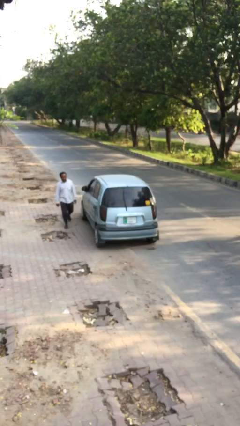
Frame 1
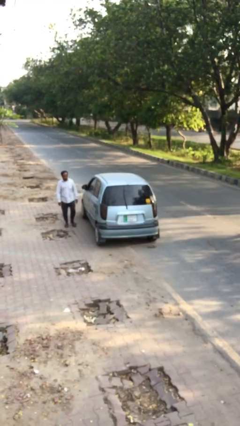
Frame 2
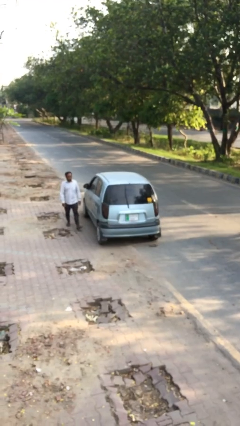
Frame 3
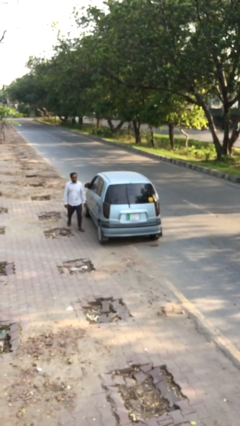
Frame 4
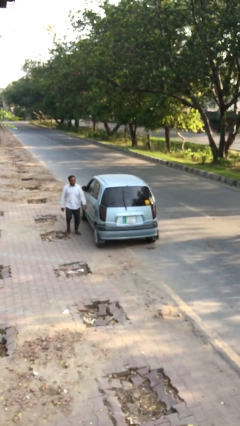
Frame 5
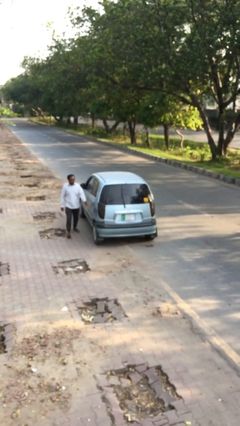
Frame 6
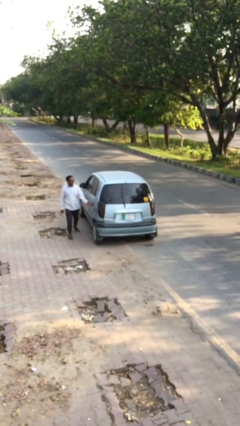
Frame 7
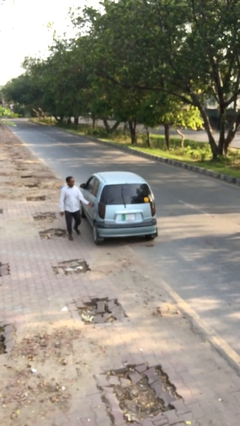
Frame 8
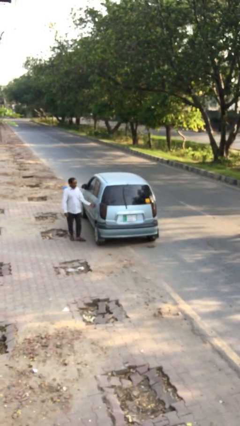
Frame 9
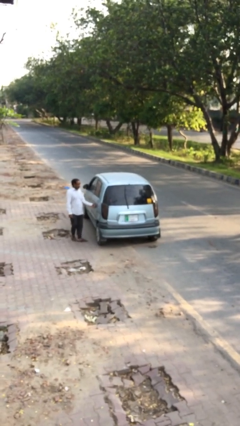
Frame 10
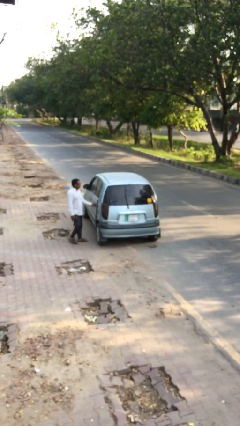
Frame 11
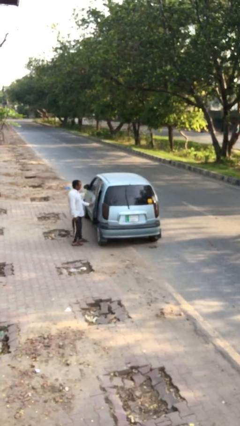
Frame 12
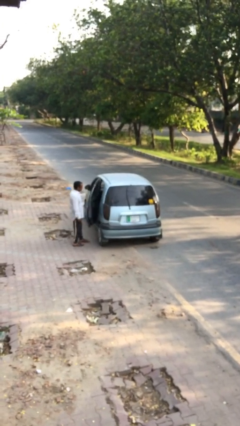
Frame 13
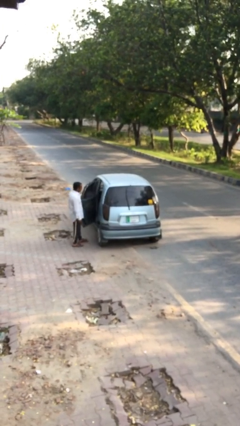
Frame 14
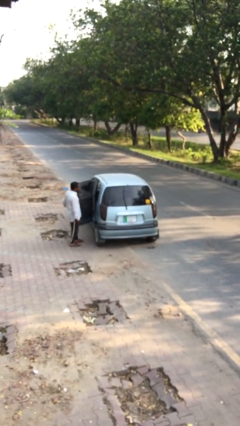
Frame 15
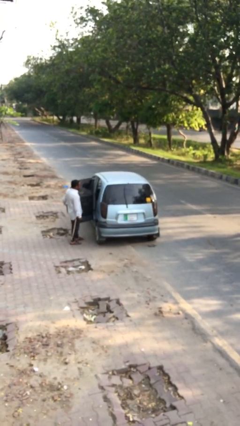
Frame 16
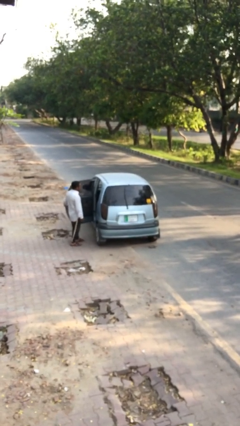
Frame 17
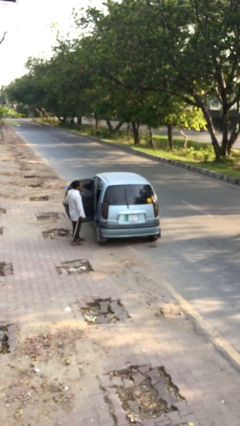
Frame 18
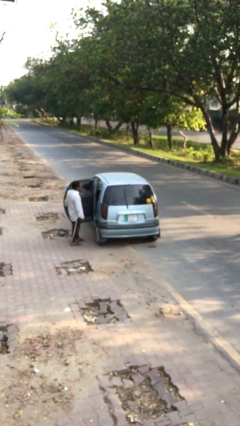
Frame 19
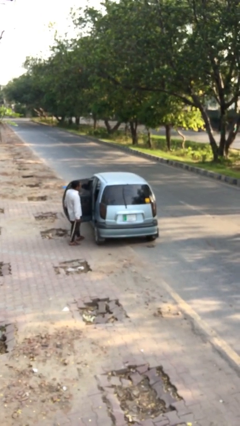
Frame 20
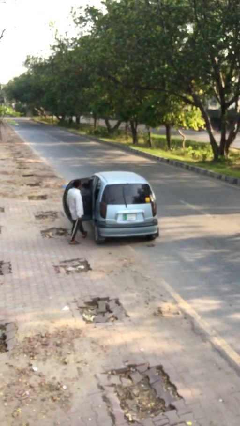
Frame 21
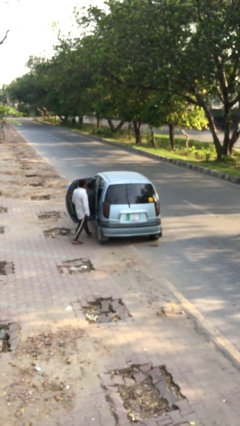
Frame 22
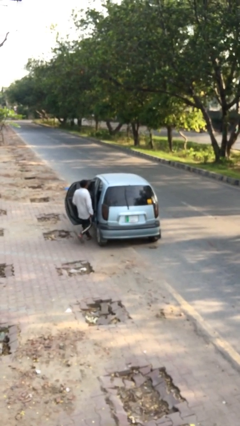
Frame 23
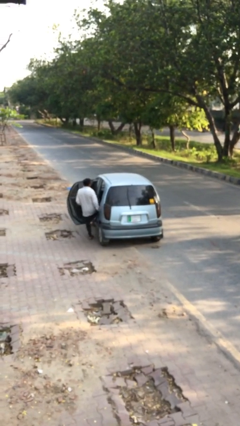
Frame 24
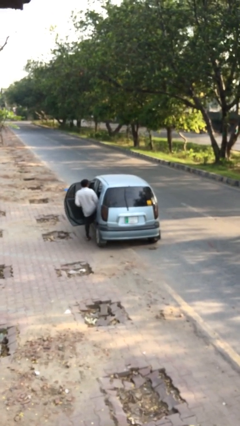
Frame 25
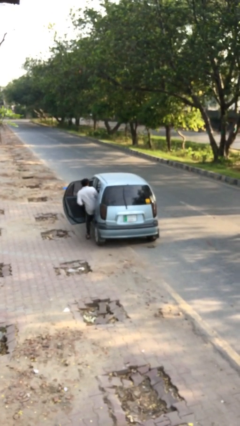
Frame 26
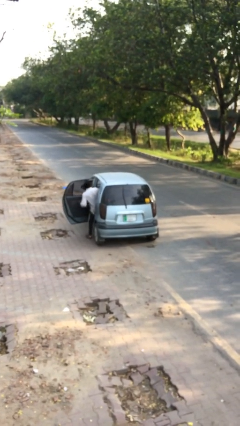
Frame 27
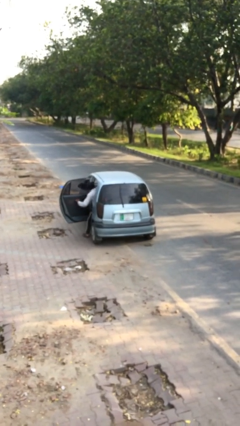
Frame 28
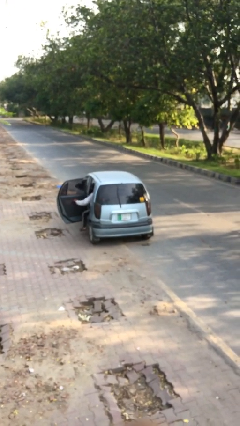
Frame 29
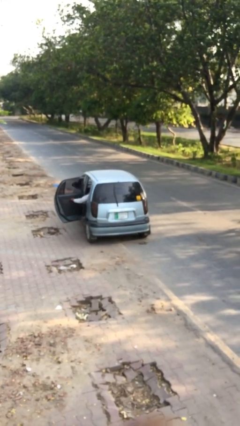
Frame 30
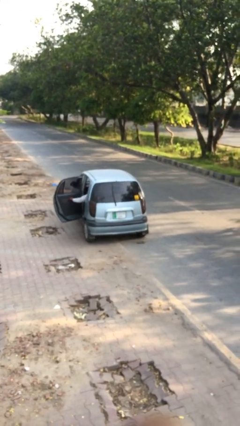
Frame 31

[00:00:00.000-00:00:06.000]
car picks up person

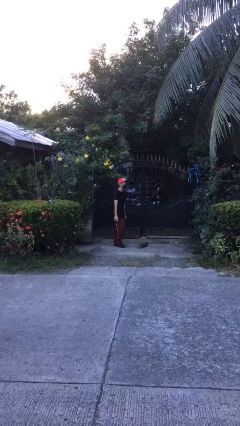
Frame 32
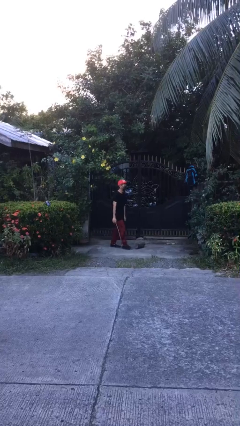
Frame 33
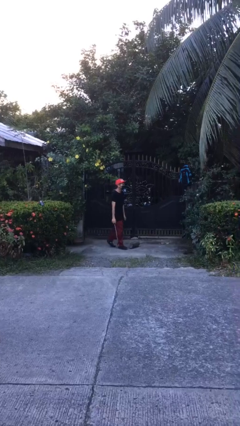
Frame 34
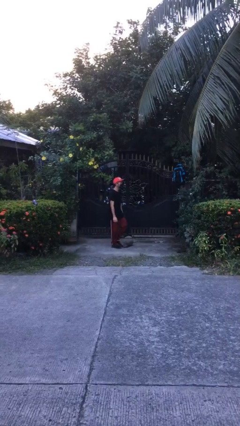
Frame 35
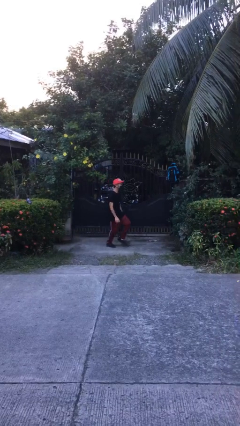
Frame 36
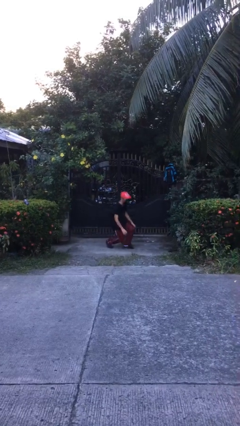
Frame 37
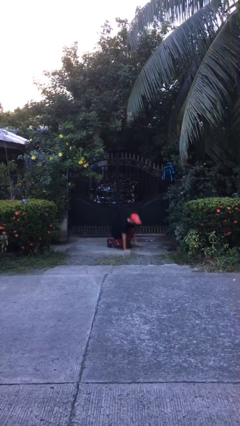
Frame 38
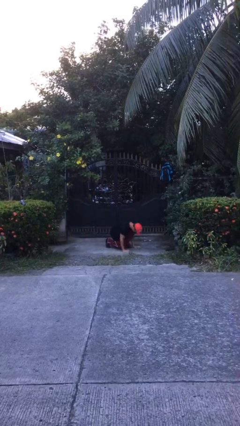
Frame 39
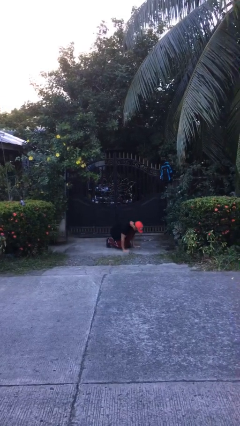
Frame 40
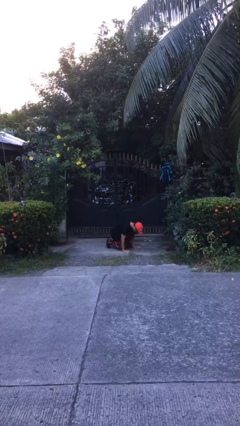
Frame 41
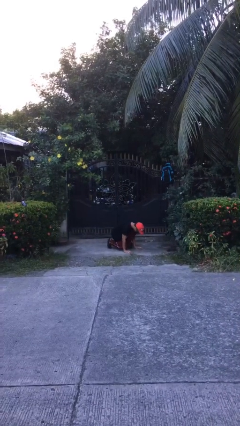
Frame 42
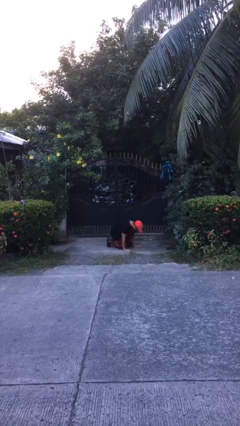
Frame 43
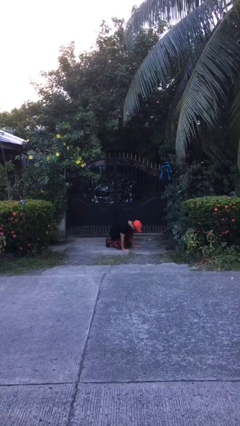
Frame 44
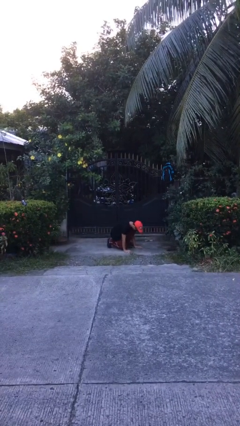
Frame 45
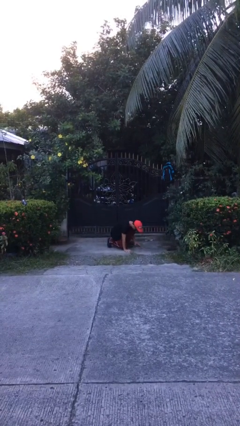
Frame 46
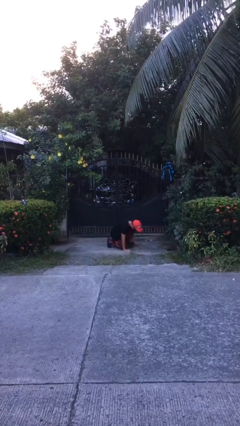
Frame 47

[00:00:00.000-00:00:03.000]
person trips on object on floor

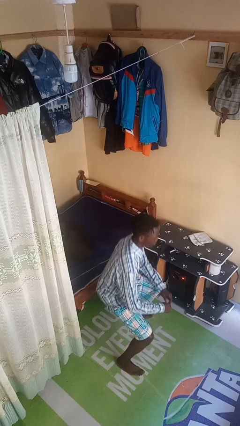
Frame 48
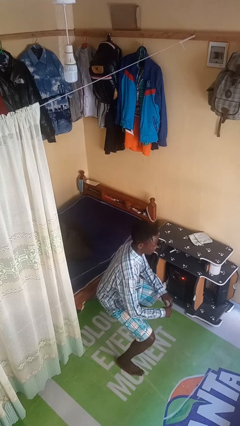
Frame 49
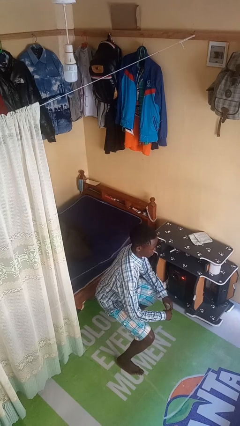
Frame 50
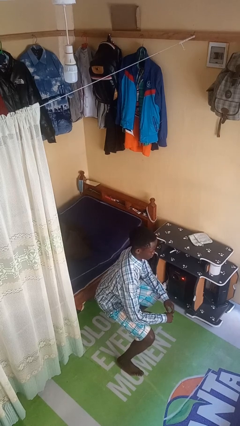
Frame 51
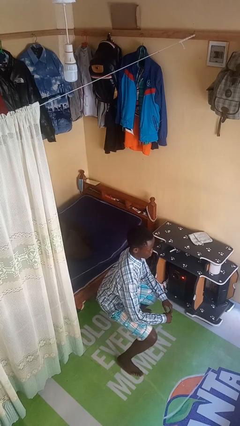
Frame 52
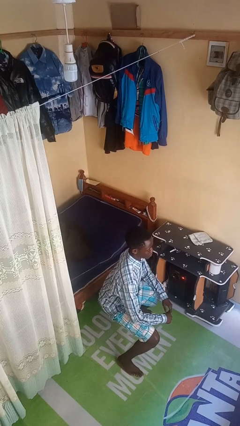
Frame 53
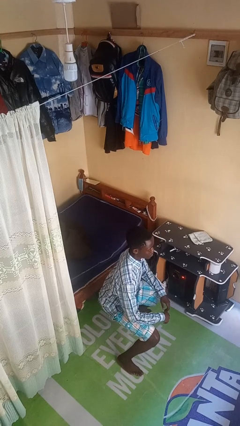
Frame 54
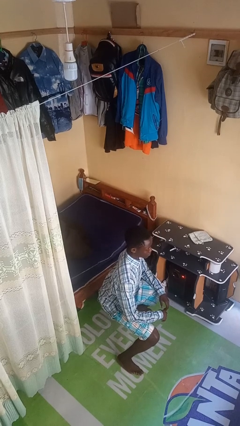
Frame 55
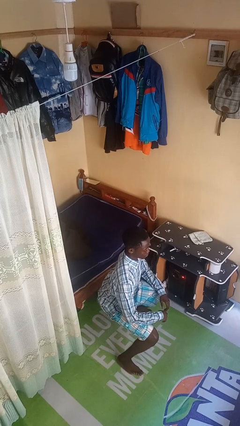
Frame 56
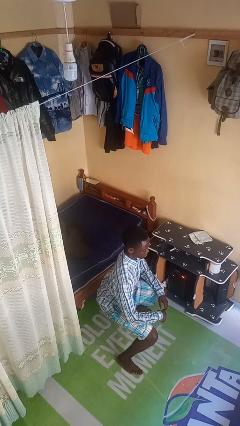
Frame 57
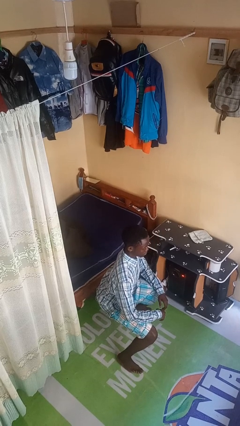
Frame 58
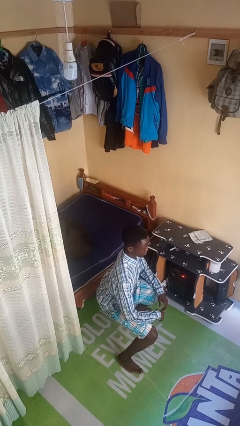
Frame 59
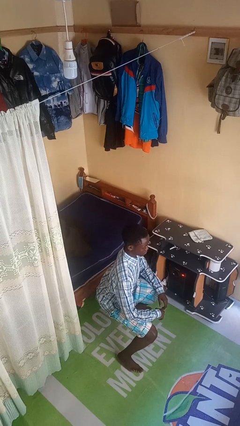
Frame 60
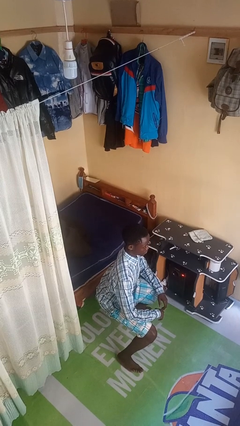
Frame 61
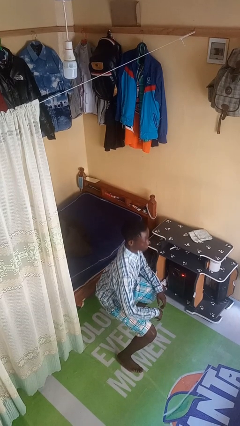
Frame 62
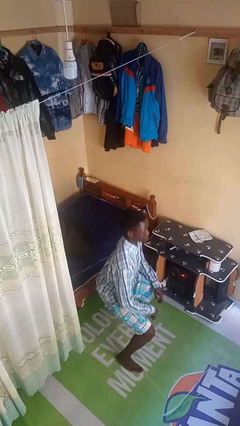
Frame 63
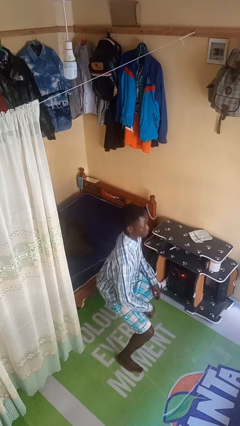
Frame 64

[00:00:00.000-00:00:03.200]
person squats

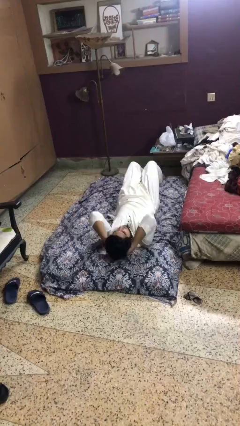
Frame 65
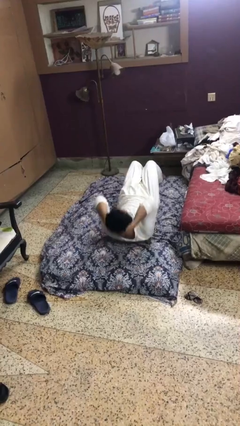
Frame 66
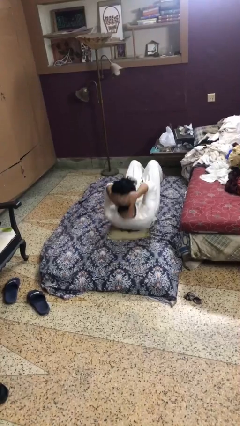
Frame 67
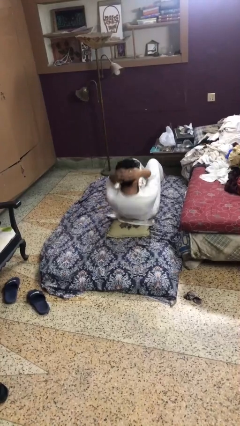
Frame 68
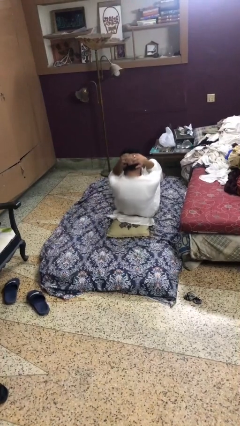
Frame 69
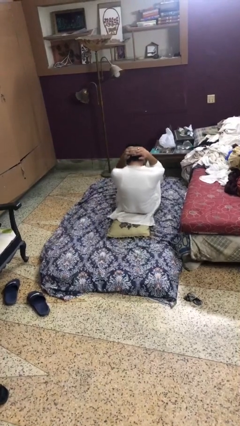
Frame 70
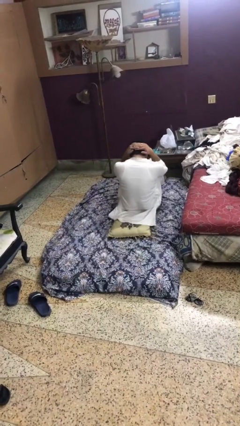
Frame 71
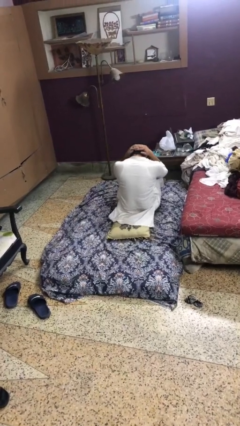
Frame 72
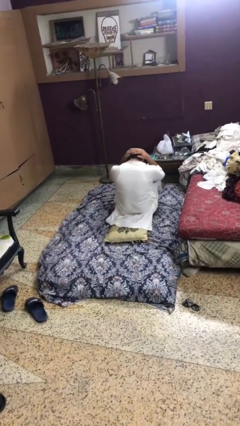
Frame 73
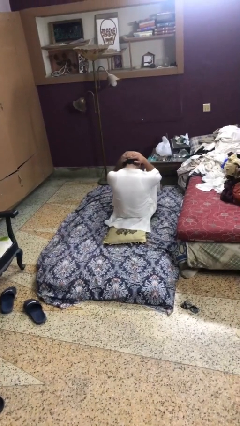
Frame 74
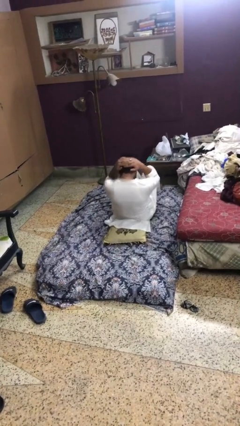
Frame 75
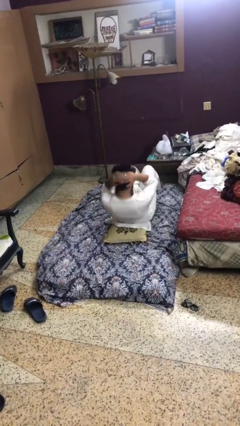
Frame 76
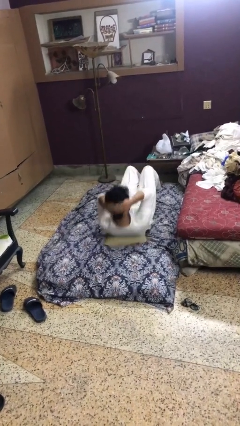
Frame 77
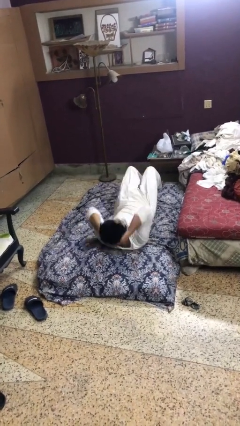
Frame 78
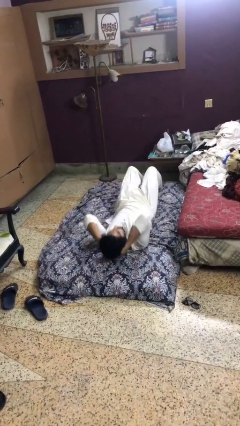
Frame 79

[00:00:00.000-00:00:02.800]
person exercises with situp

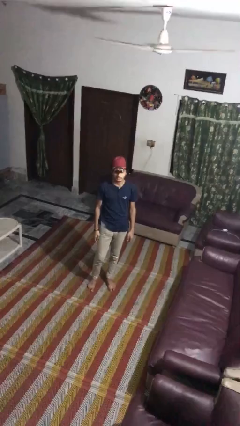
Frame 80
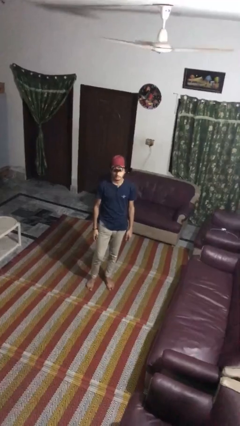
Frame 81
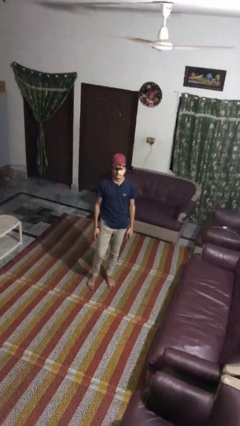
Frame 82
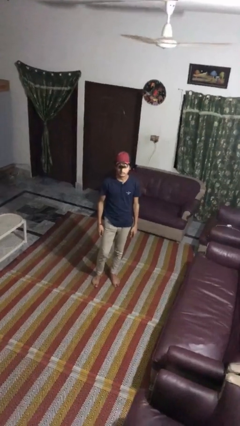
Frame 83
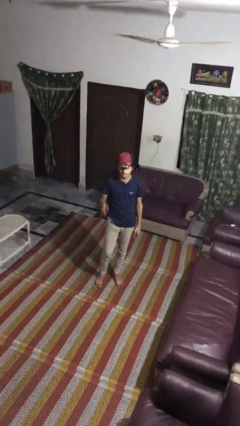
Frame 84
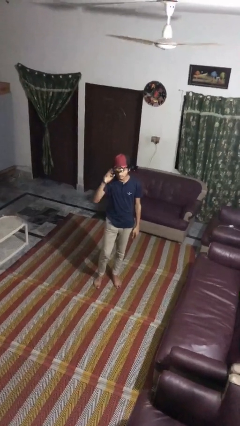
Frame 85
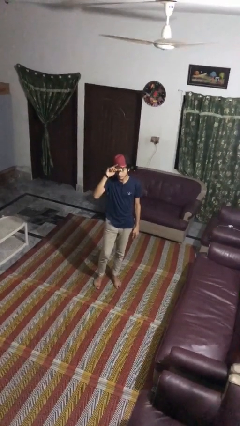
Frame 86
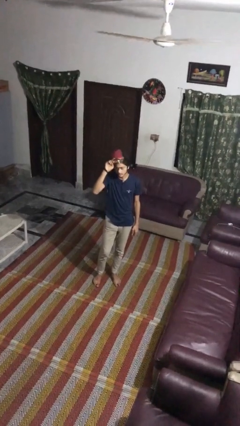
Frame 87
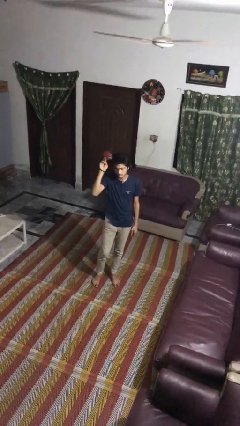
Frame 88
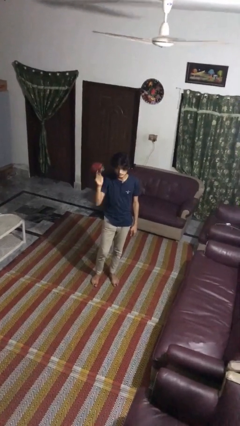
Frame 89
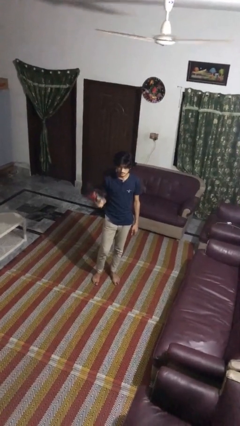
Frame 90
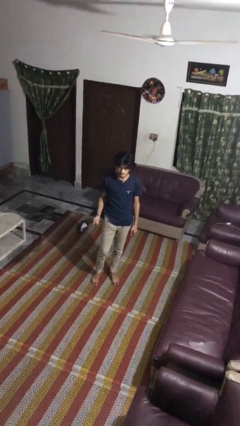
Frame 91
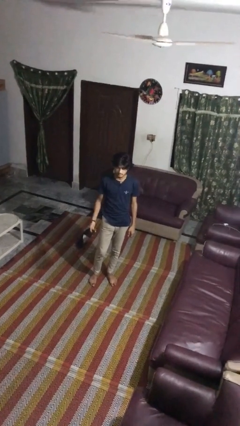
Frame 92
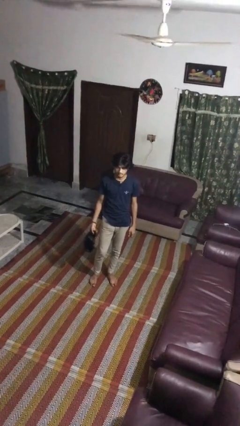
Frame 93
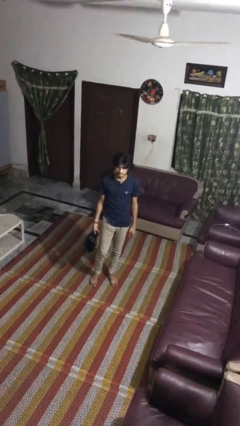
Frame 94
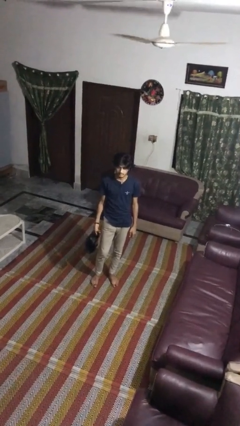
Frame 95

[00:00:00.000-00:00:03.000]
person takes off hat
